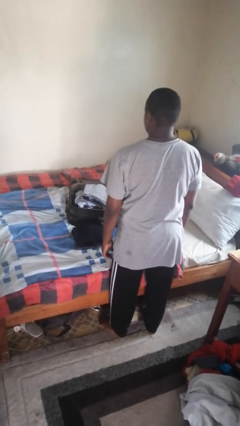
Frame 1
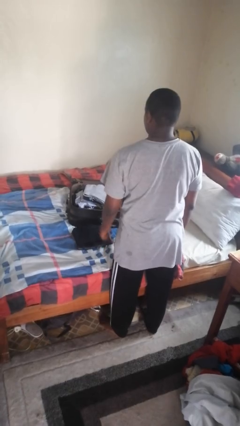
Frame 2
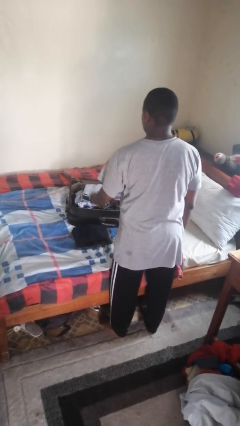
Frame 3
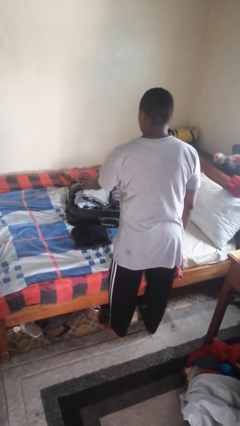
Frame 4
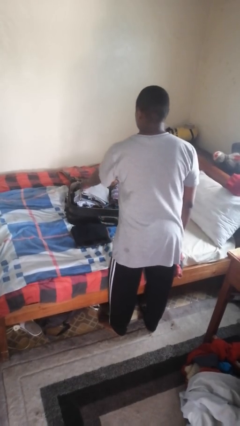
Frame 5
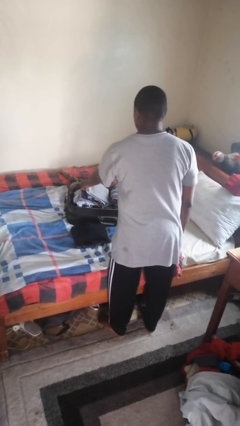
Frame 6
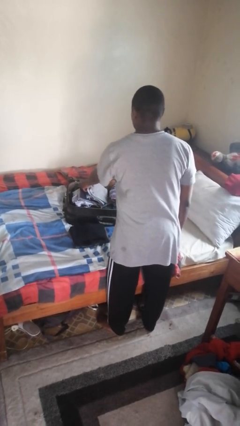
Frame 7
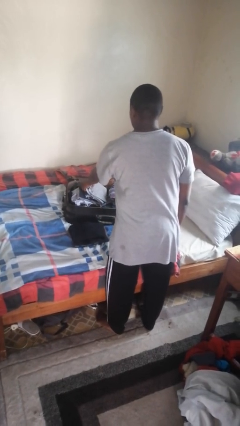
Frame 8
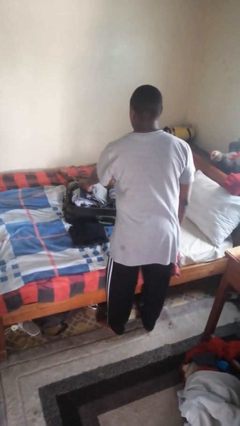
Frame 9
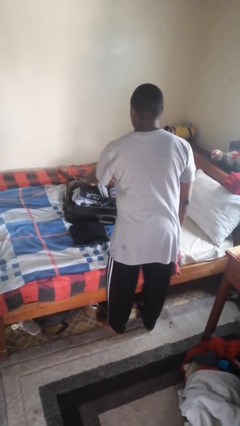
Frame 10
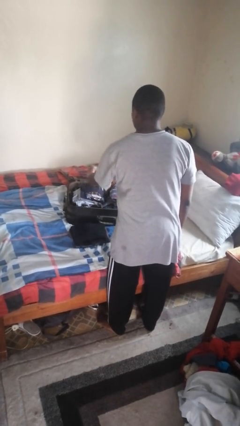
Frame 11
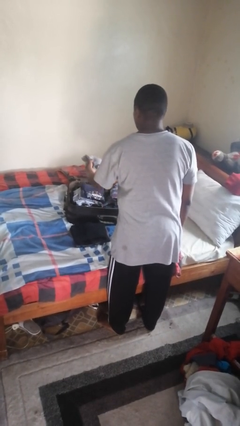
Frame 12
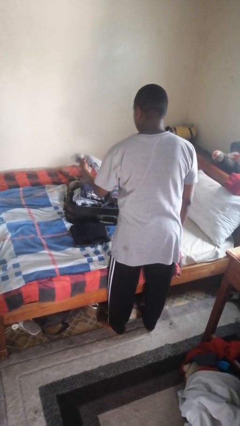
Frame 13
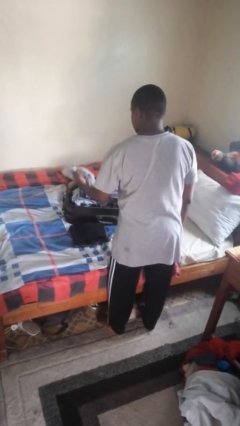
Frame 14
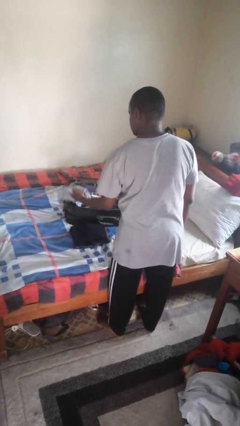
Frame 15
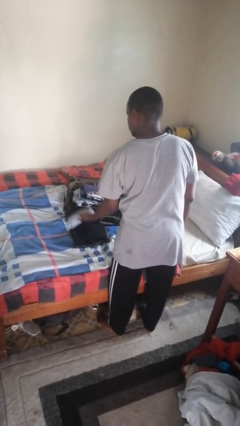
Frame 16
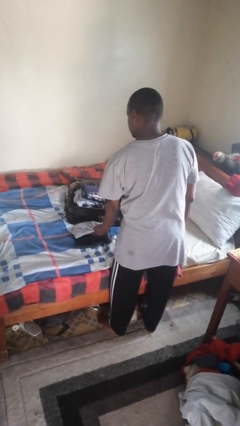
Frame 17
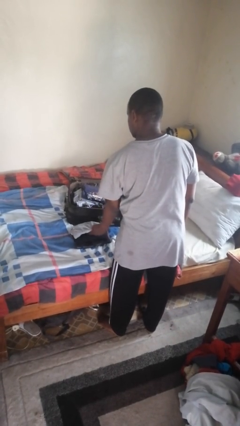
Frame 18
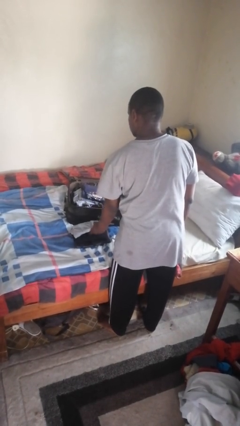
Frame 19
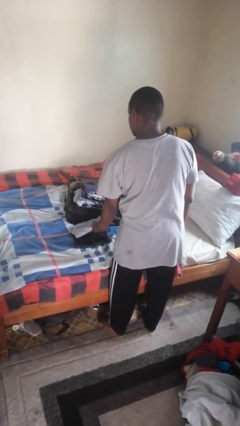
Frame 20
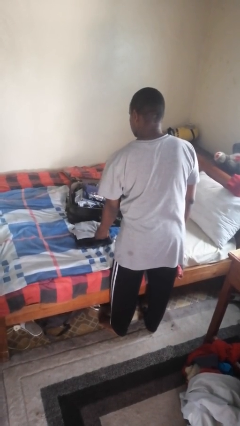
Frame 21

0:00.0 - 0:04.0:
person unloads clothes from suitcase

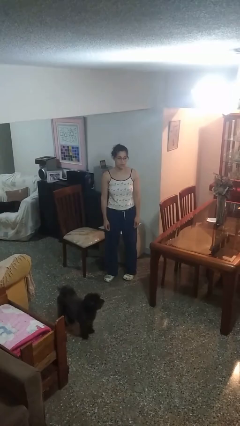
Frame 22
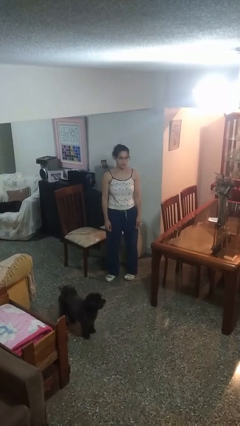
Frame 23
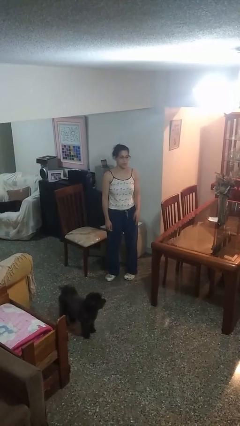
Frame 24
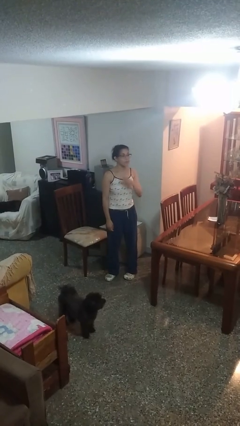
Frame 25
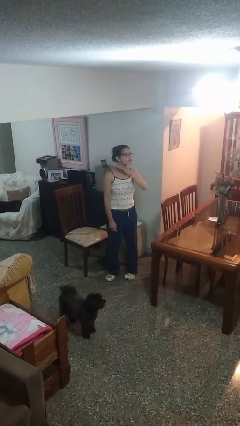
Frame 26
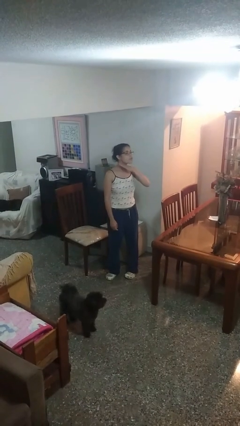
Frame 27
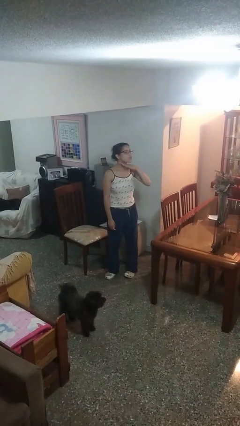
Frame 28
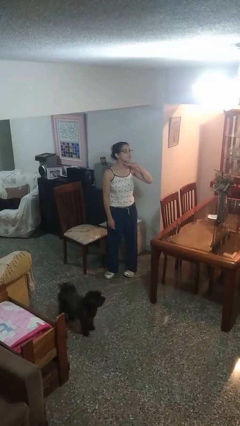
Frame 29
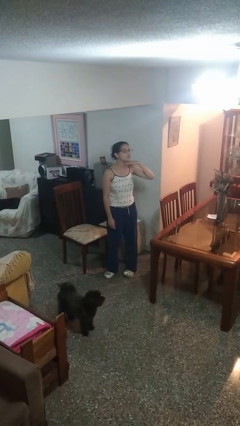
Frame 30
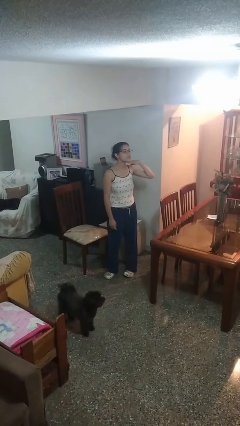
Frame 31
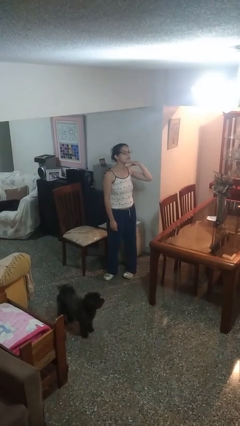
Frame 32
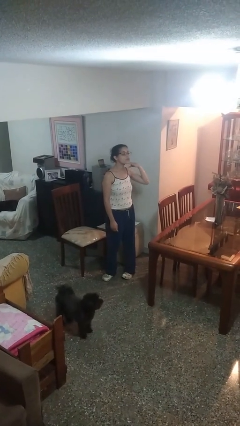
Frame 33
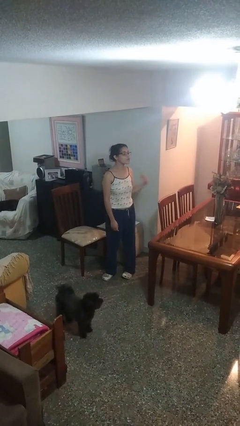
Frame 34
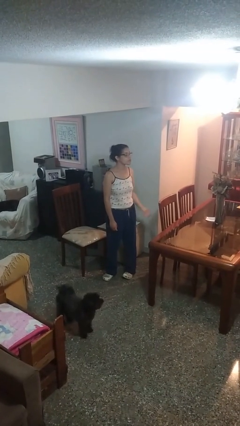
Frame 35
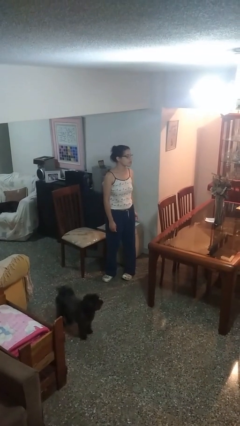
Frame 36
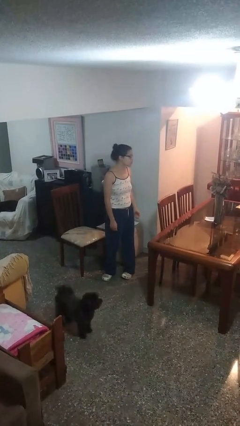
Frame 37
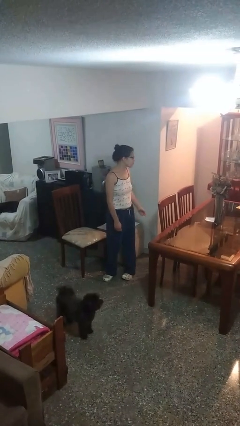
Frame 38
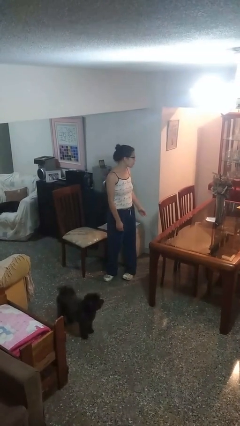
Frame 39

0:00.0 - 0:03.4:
person gestures cut

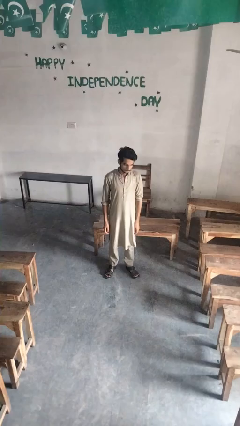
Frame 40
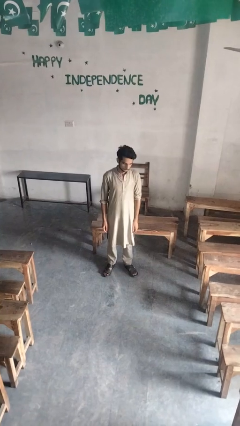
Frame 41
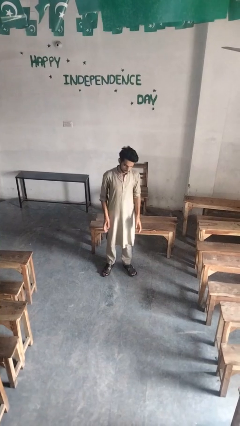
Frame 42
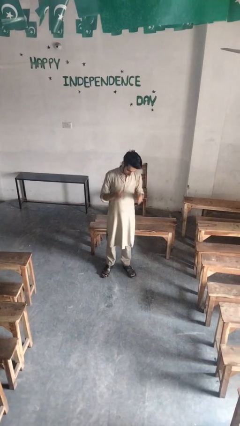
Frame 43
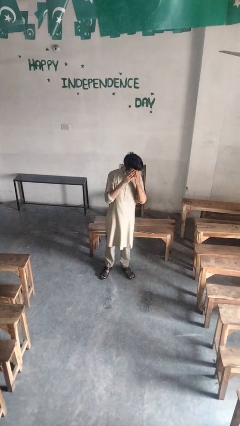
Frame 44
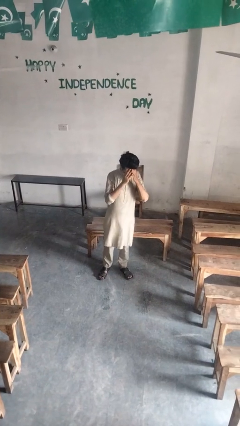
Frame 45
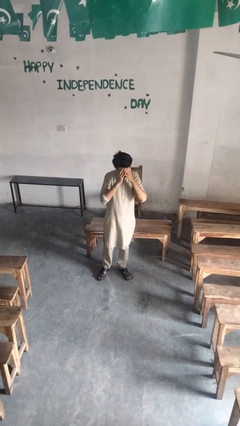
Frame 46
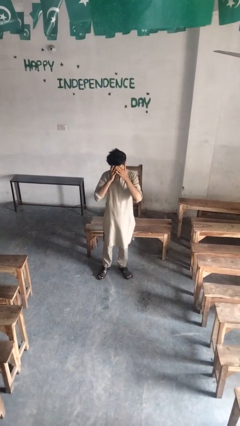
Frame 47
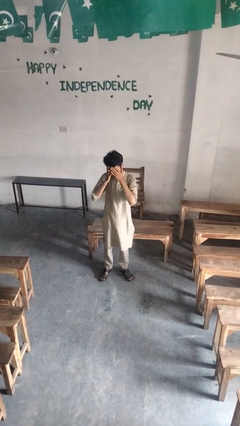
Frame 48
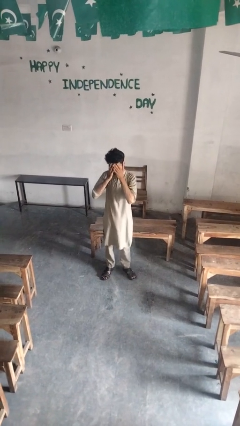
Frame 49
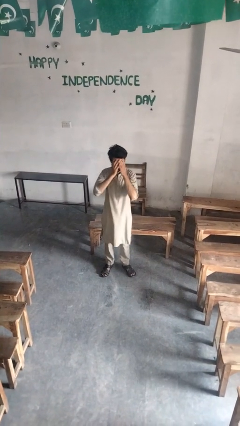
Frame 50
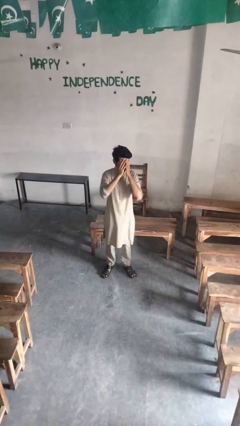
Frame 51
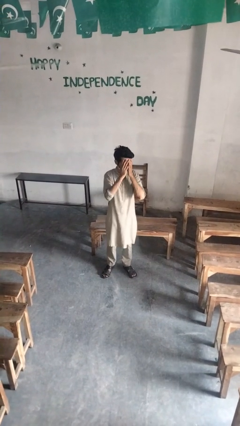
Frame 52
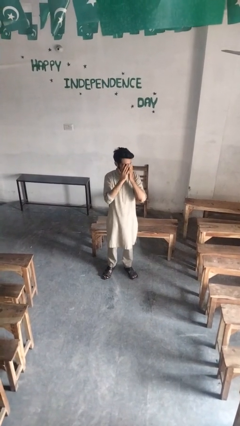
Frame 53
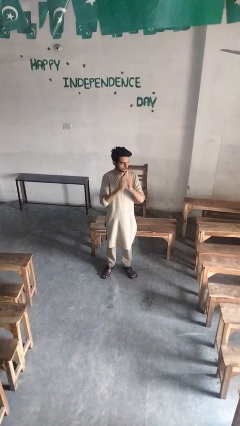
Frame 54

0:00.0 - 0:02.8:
person covers face with hands

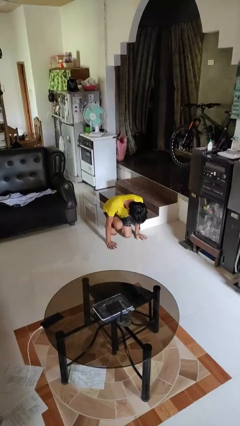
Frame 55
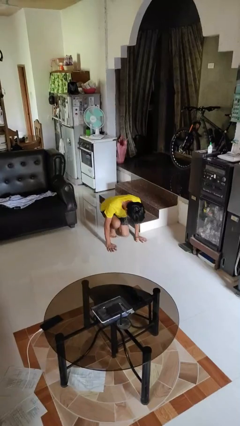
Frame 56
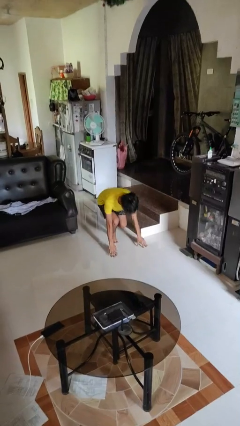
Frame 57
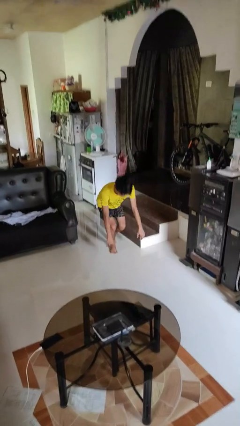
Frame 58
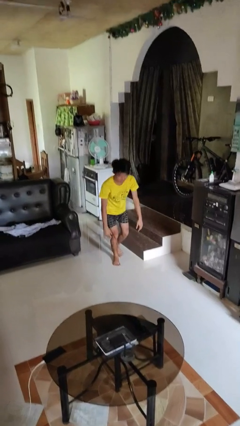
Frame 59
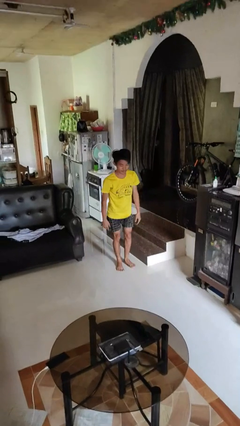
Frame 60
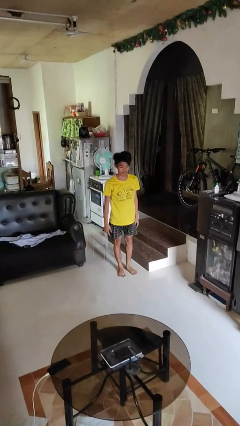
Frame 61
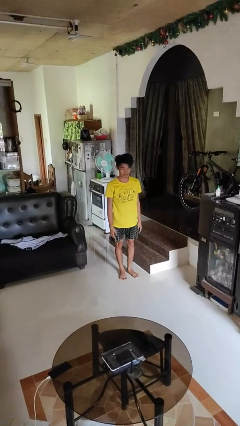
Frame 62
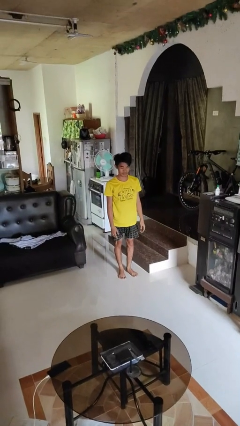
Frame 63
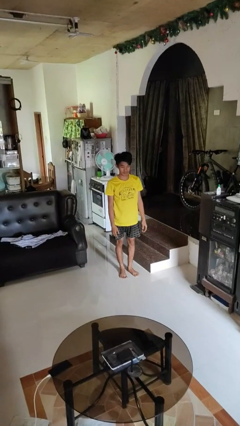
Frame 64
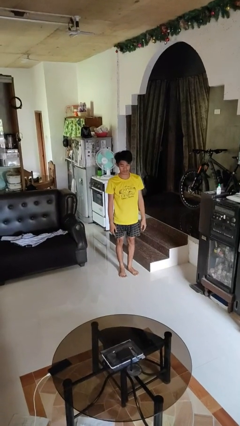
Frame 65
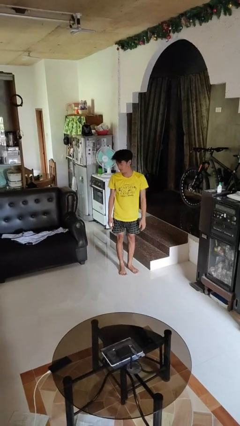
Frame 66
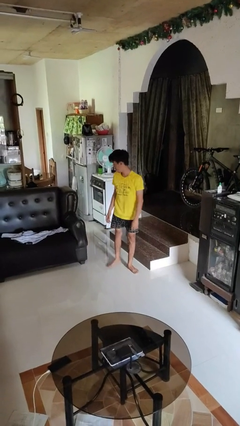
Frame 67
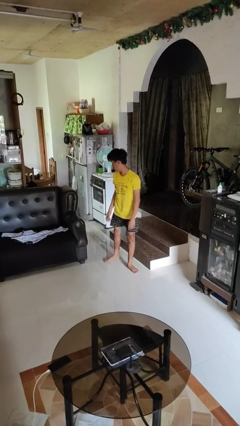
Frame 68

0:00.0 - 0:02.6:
person stands up from floor

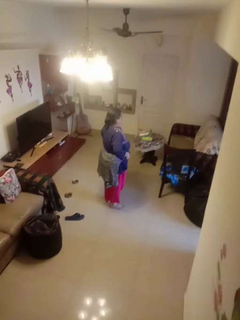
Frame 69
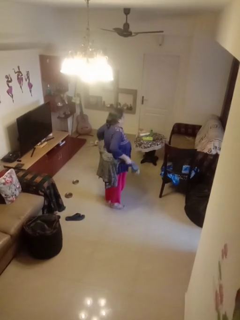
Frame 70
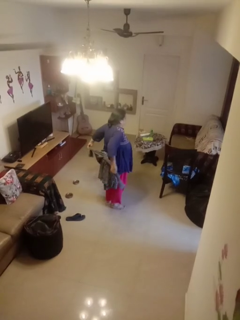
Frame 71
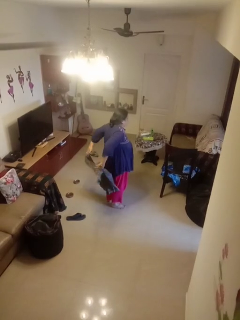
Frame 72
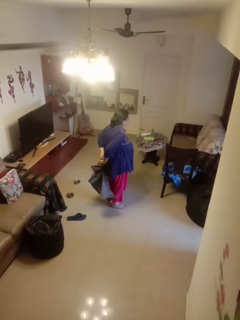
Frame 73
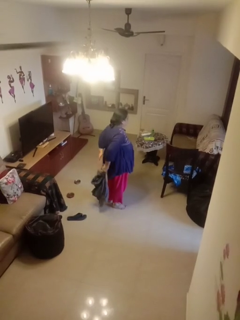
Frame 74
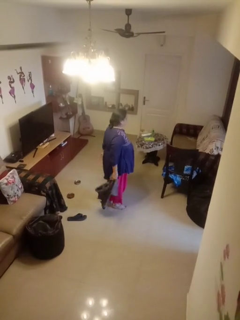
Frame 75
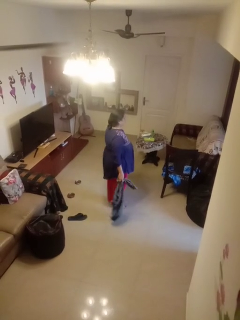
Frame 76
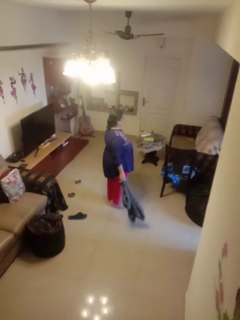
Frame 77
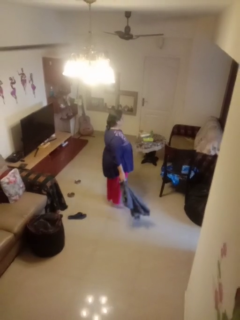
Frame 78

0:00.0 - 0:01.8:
person unties jacket around waist

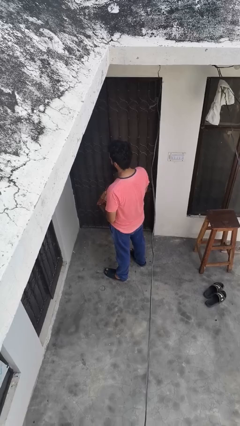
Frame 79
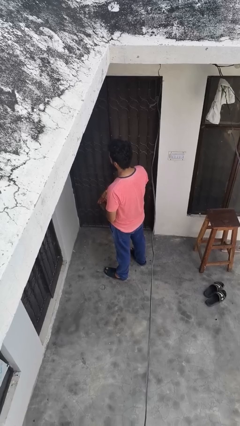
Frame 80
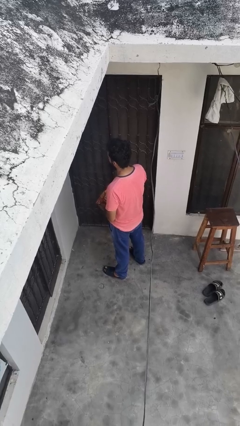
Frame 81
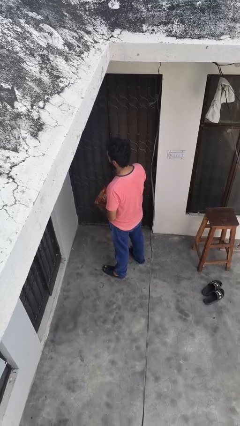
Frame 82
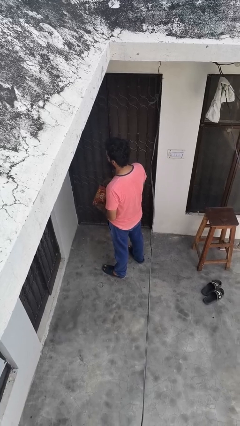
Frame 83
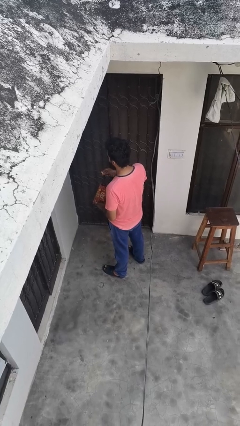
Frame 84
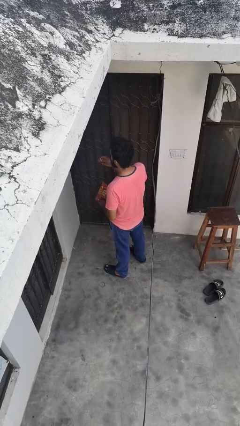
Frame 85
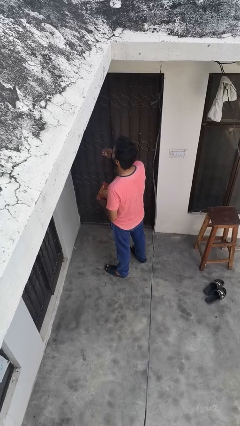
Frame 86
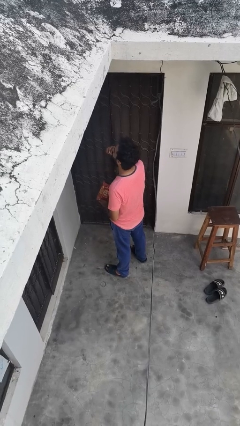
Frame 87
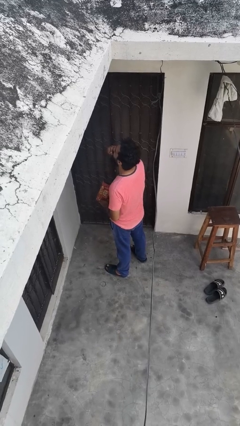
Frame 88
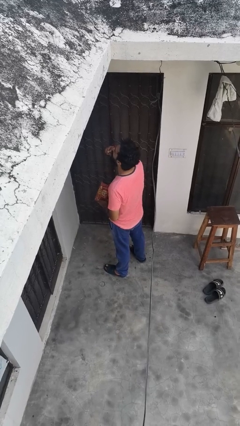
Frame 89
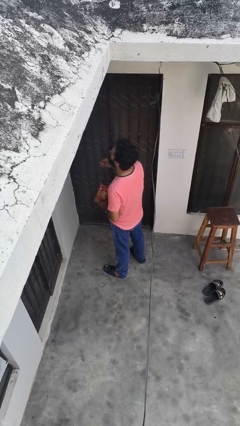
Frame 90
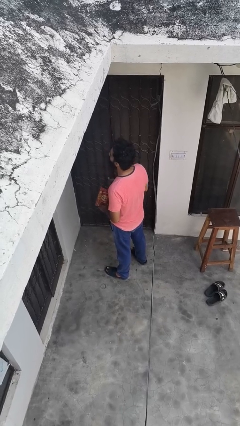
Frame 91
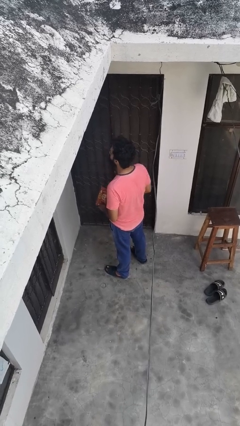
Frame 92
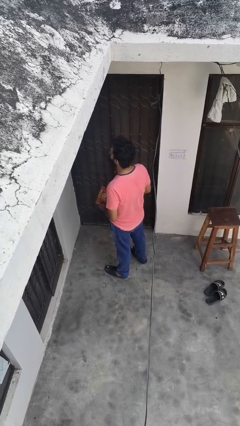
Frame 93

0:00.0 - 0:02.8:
person eats snack from bag

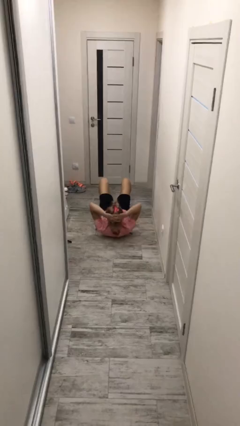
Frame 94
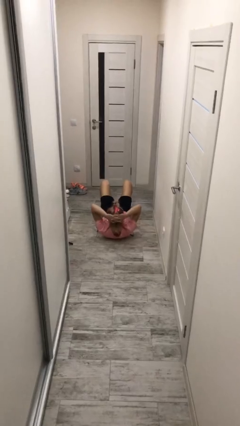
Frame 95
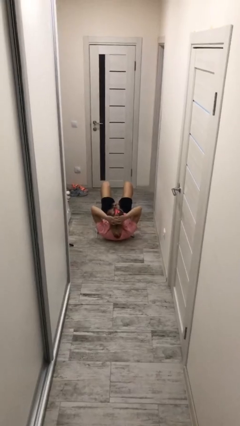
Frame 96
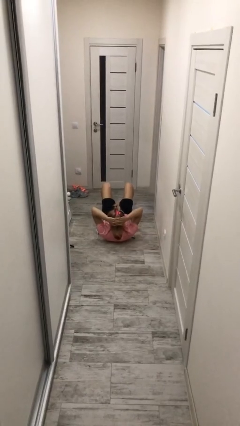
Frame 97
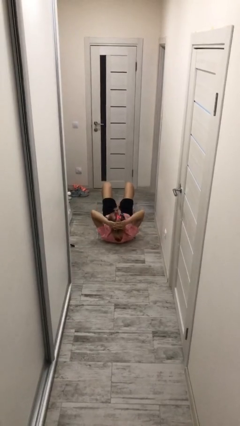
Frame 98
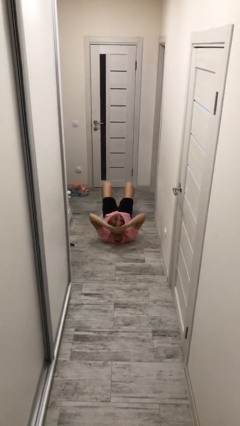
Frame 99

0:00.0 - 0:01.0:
person exercises with situp
